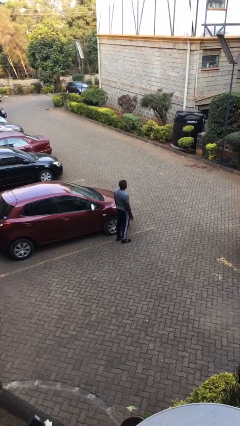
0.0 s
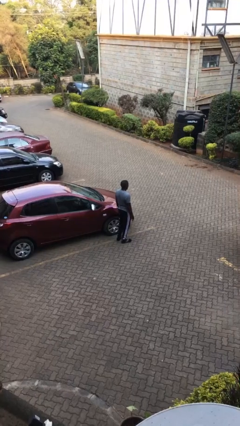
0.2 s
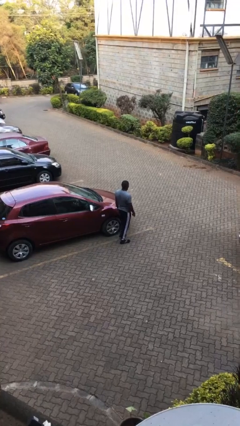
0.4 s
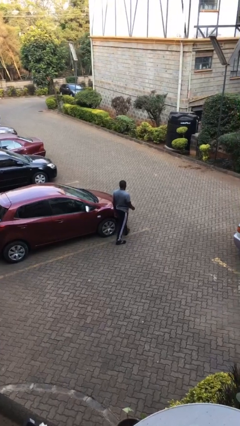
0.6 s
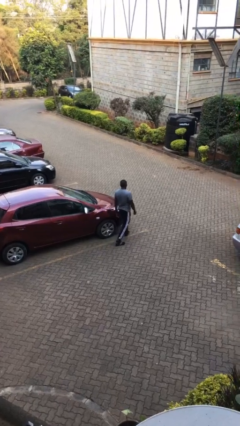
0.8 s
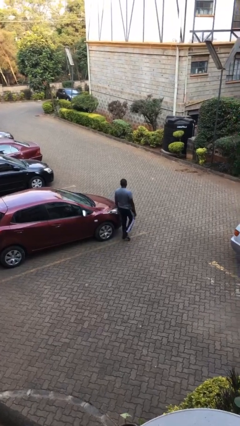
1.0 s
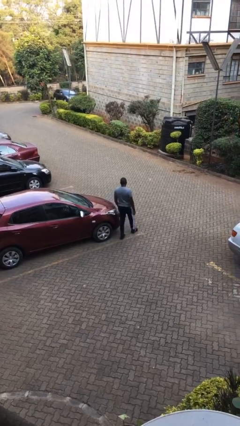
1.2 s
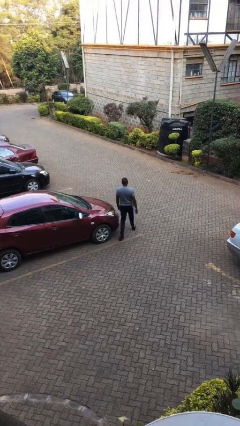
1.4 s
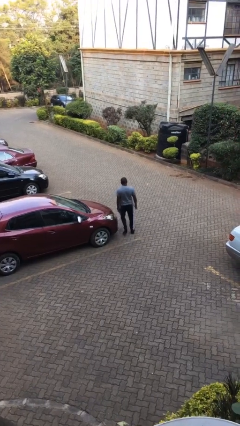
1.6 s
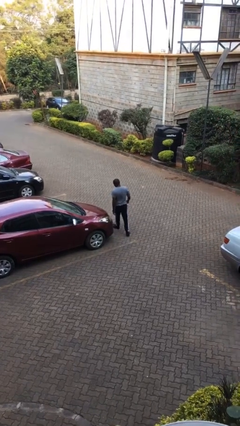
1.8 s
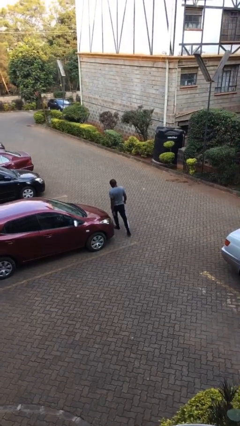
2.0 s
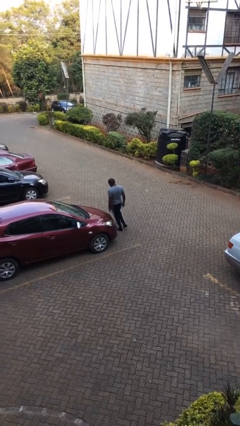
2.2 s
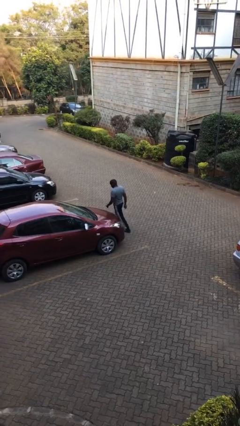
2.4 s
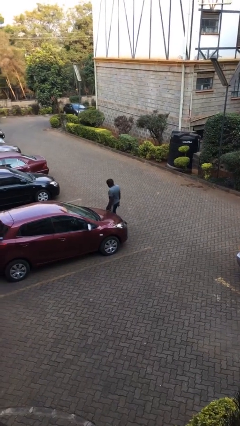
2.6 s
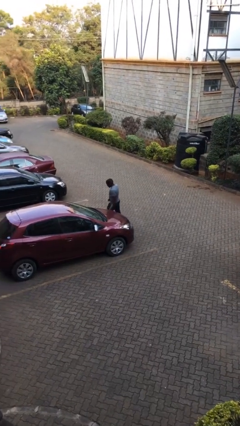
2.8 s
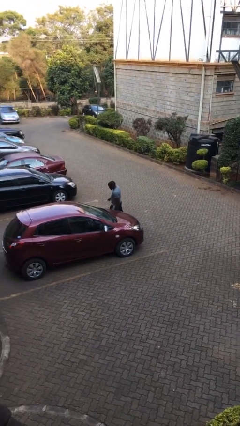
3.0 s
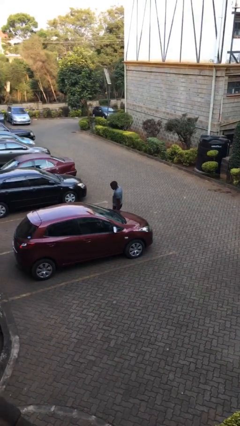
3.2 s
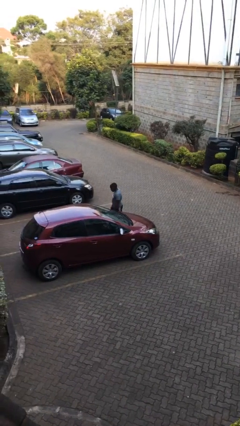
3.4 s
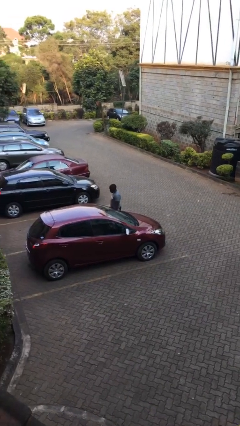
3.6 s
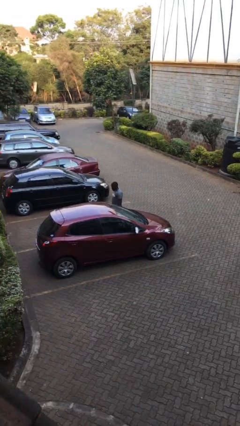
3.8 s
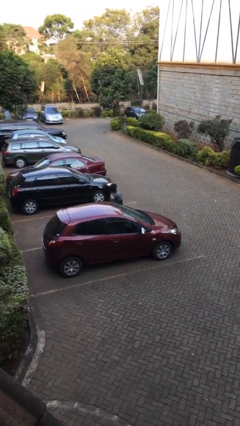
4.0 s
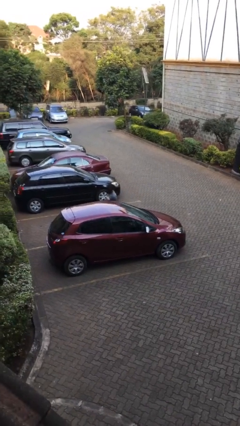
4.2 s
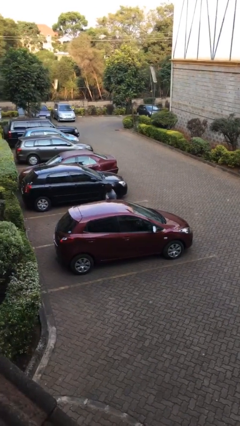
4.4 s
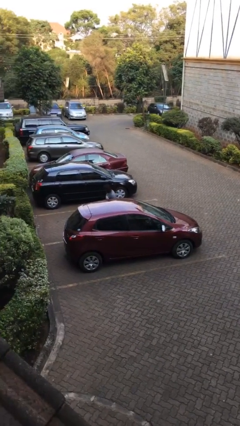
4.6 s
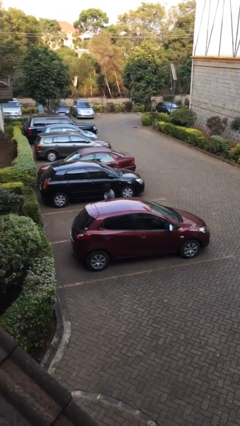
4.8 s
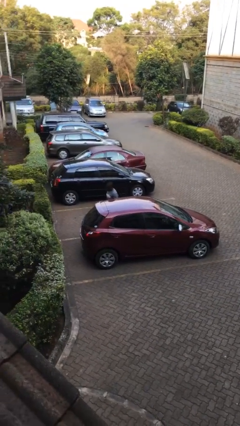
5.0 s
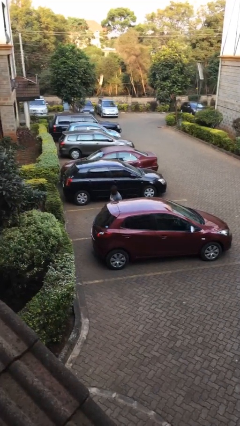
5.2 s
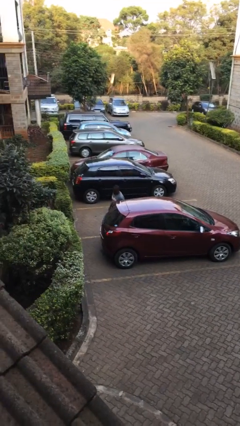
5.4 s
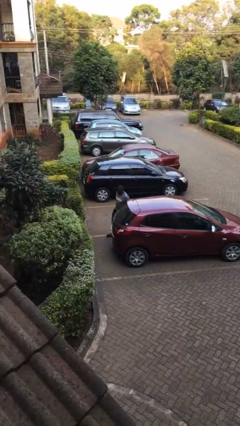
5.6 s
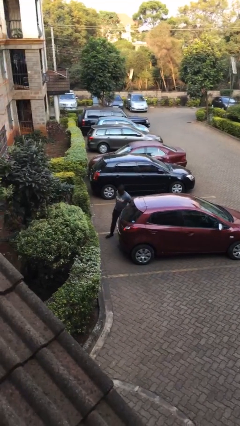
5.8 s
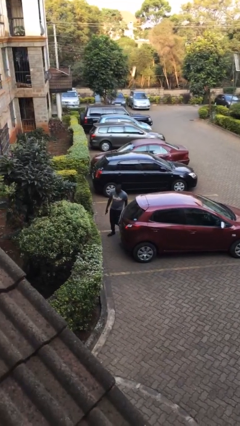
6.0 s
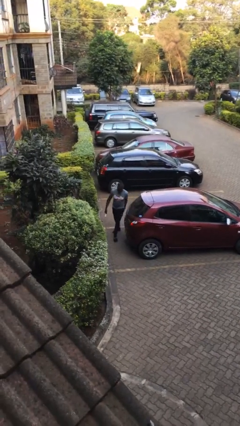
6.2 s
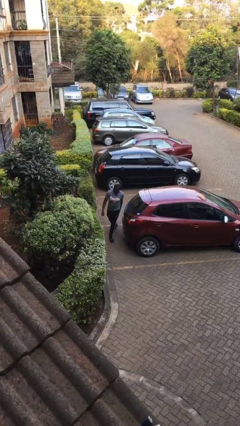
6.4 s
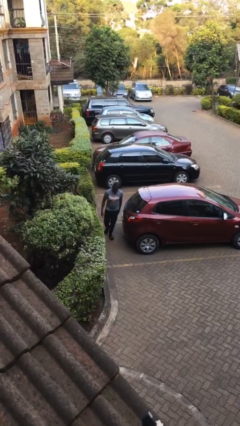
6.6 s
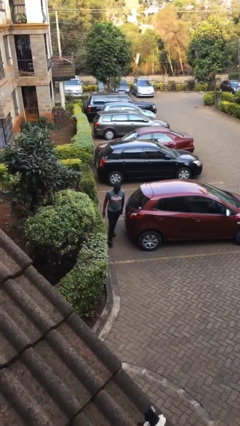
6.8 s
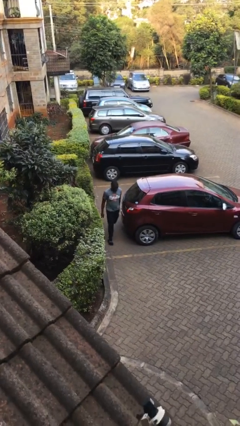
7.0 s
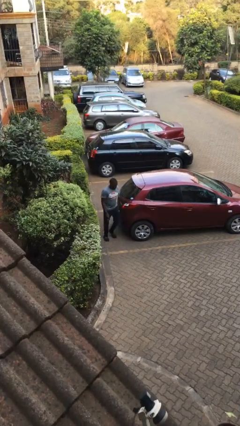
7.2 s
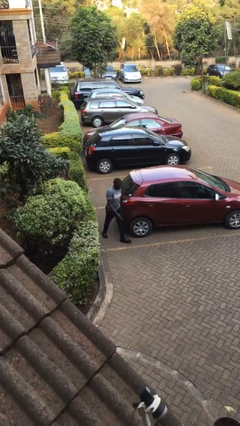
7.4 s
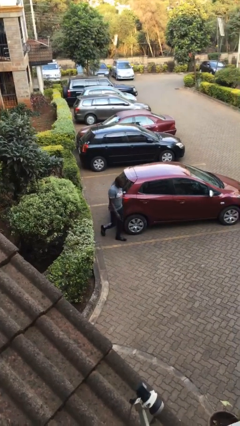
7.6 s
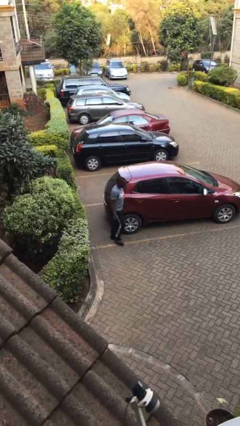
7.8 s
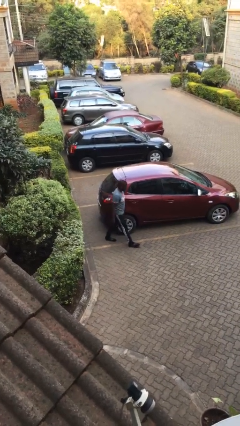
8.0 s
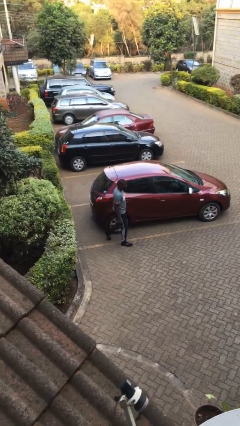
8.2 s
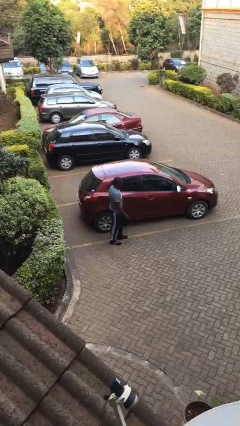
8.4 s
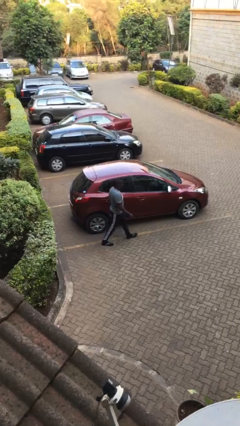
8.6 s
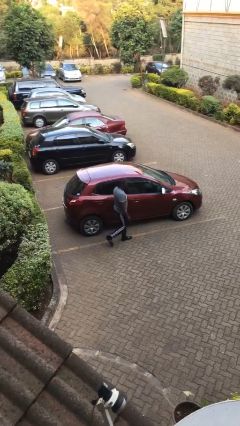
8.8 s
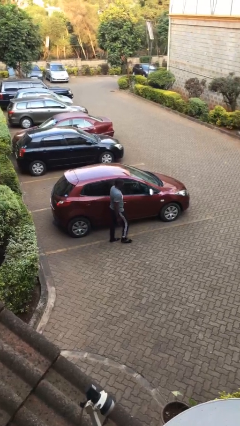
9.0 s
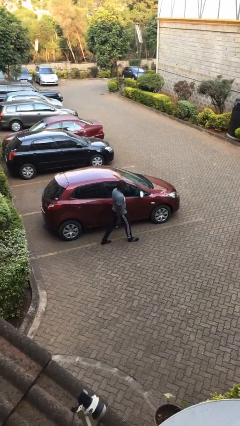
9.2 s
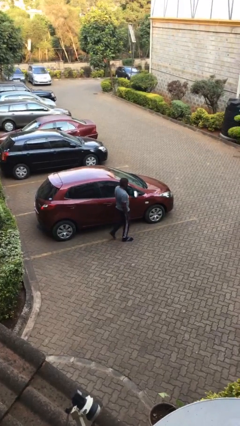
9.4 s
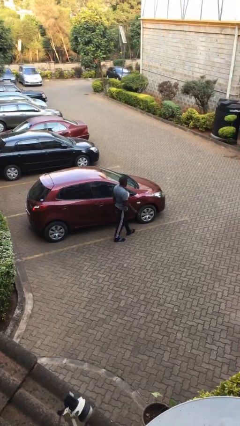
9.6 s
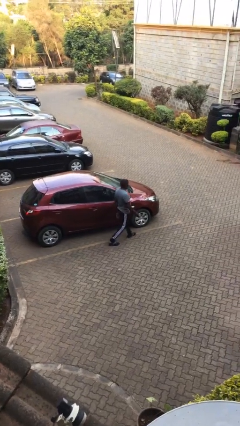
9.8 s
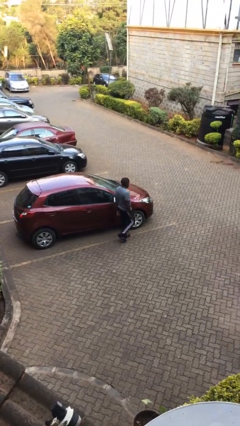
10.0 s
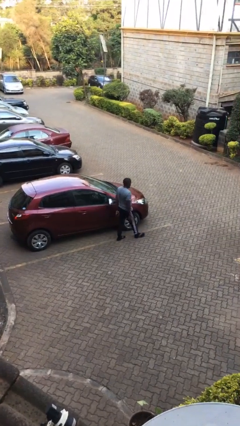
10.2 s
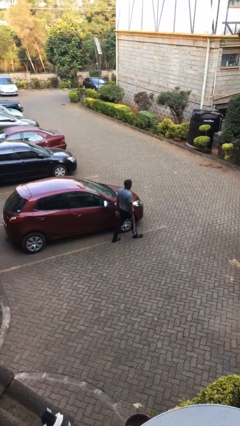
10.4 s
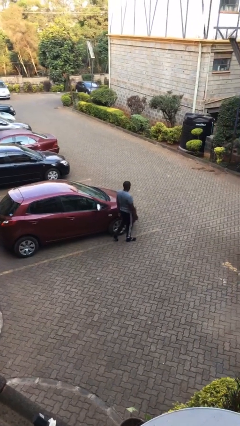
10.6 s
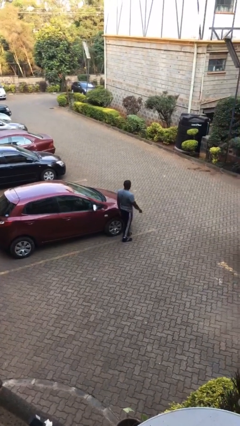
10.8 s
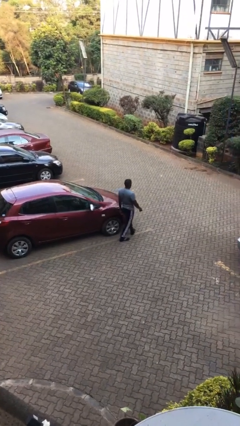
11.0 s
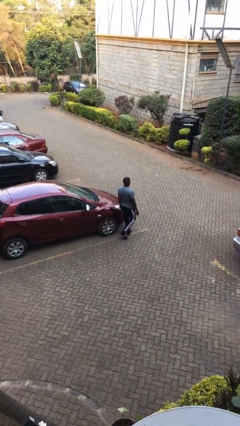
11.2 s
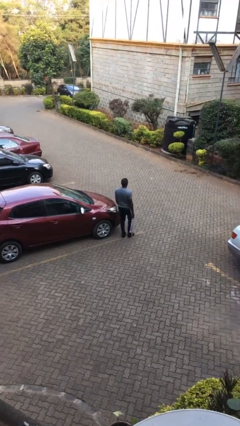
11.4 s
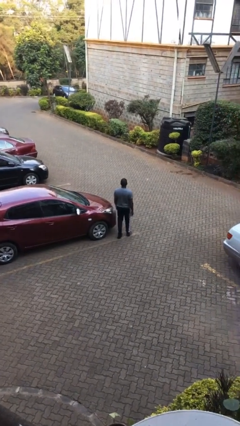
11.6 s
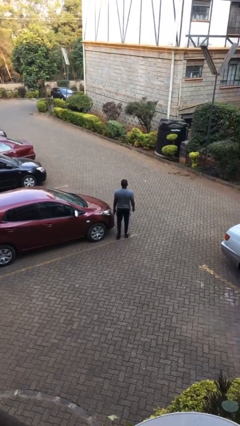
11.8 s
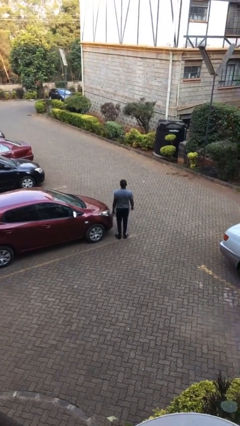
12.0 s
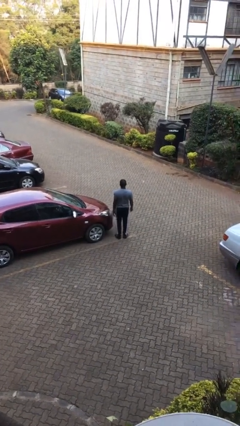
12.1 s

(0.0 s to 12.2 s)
person walks around car

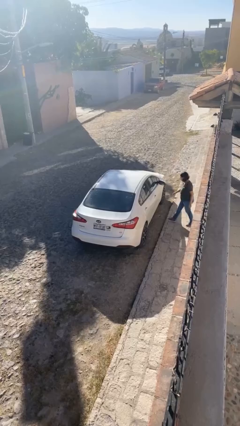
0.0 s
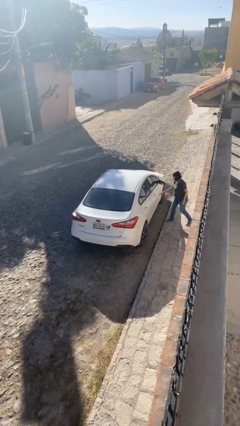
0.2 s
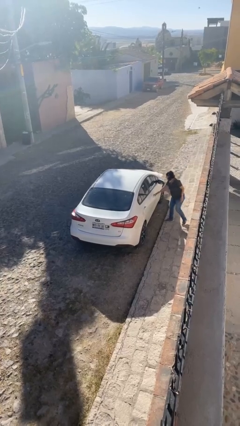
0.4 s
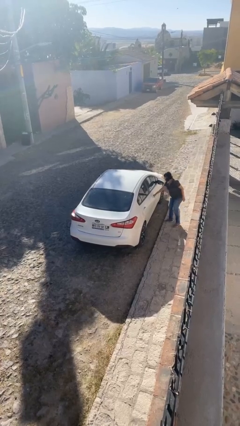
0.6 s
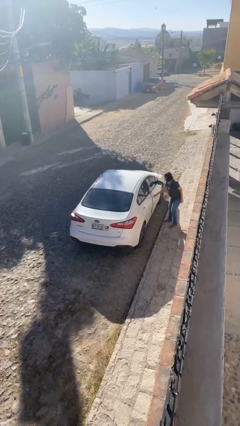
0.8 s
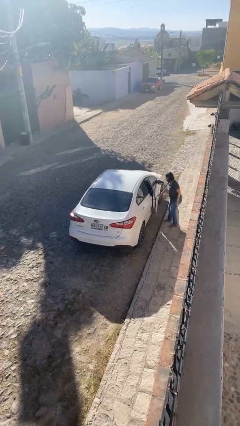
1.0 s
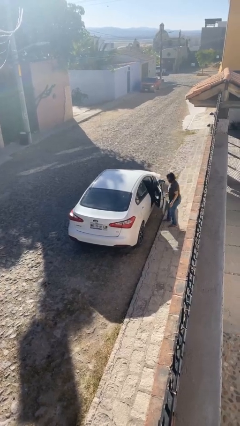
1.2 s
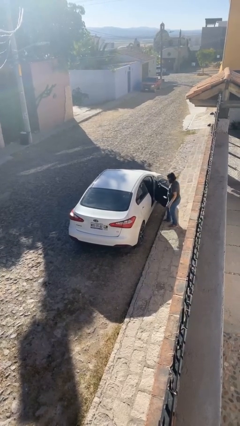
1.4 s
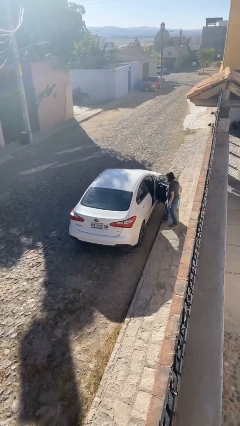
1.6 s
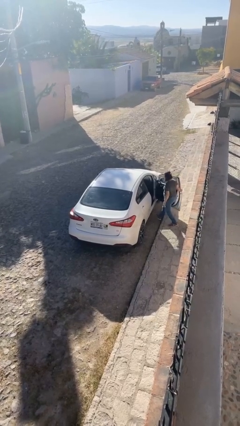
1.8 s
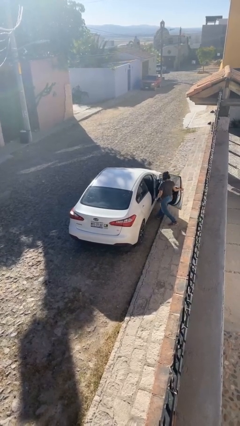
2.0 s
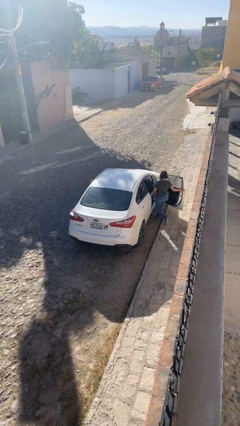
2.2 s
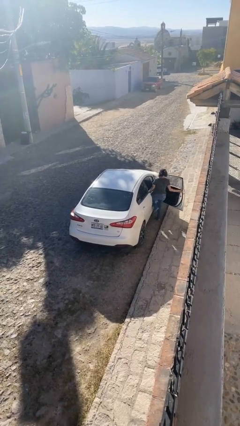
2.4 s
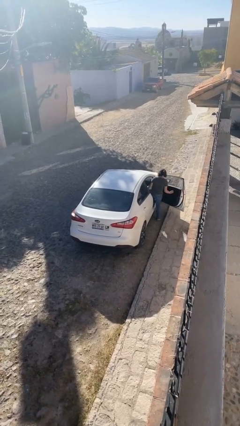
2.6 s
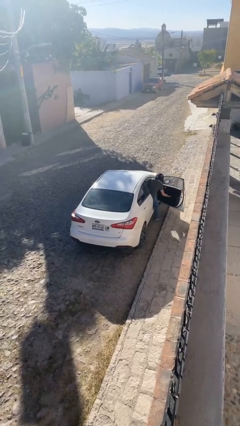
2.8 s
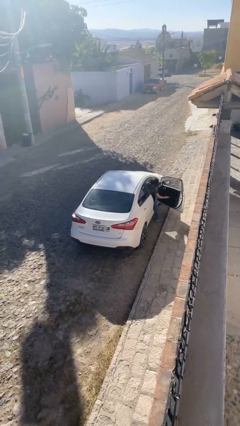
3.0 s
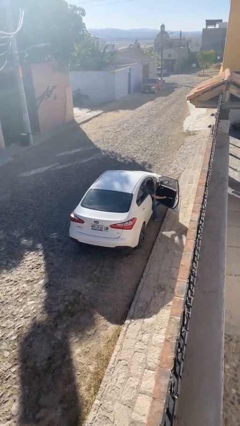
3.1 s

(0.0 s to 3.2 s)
car picks up person

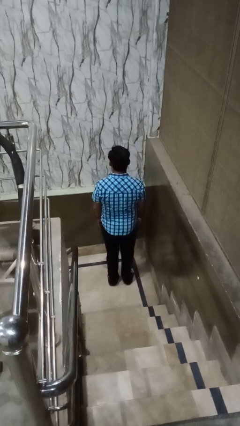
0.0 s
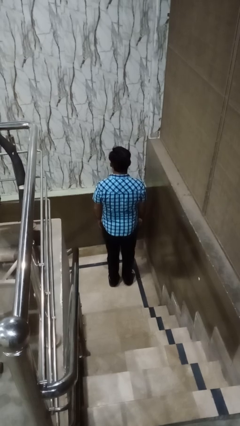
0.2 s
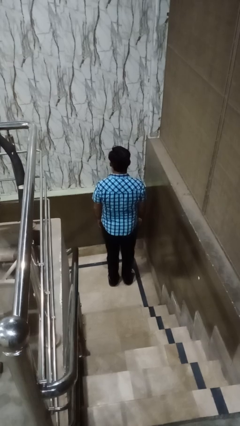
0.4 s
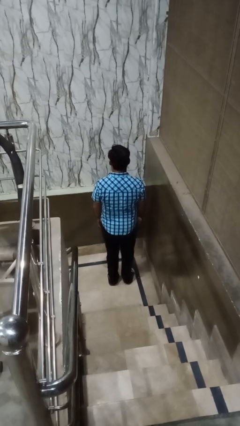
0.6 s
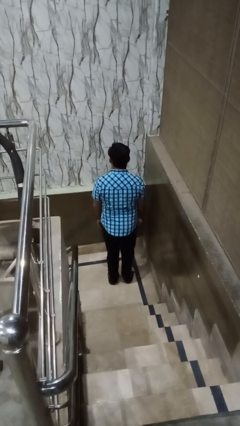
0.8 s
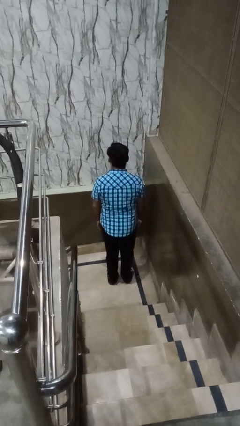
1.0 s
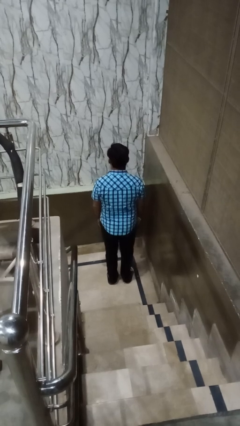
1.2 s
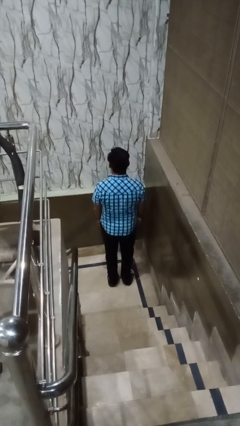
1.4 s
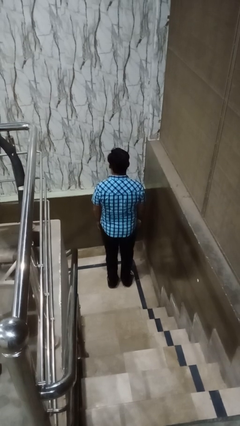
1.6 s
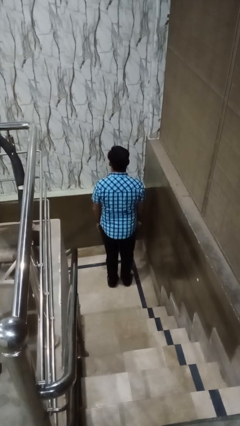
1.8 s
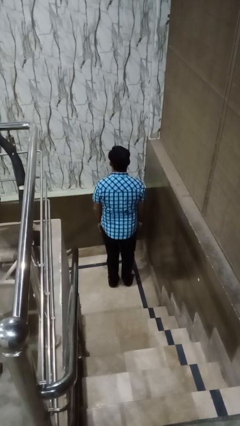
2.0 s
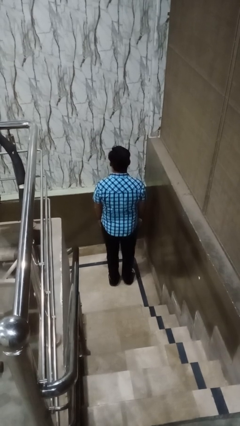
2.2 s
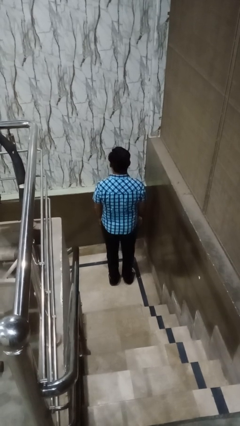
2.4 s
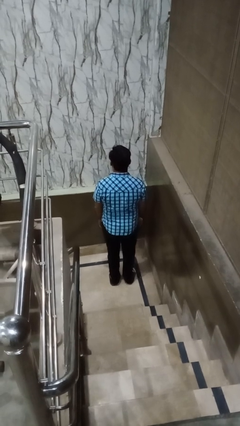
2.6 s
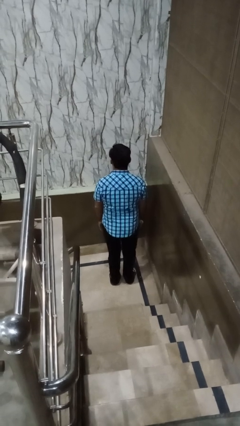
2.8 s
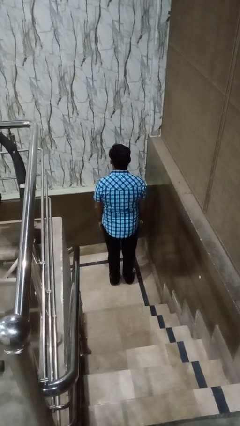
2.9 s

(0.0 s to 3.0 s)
person wiggles hips
